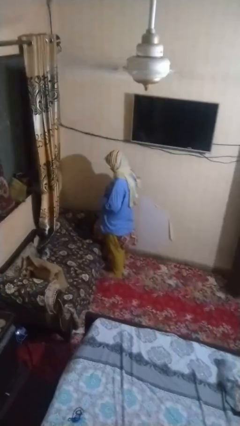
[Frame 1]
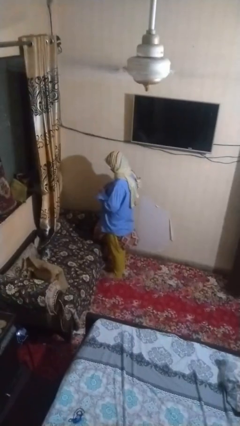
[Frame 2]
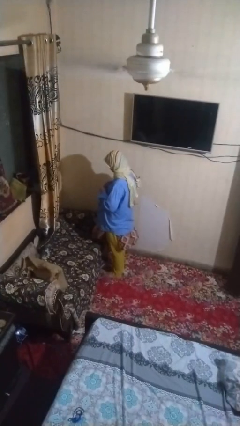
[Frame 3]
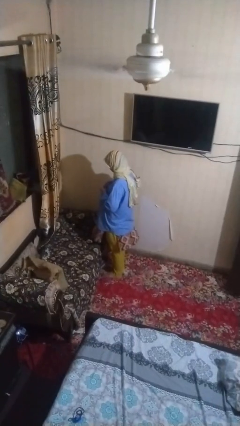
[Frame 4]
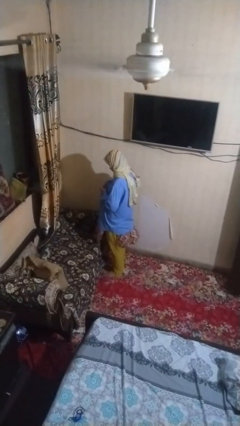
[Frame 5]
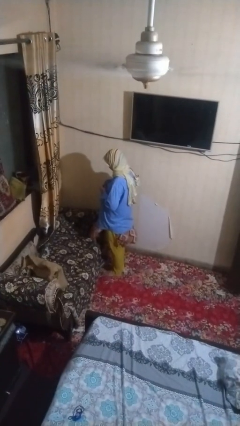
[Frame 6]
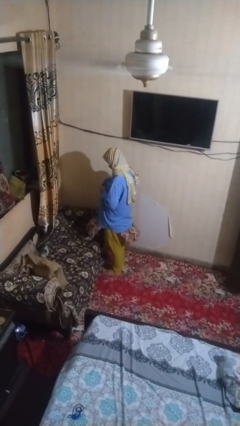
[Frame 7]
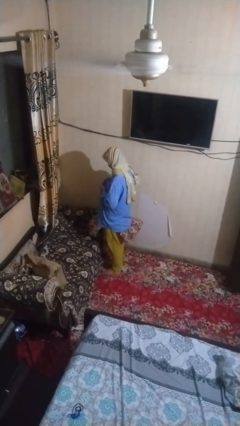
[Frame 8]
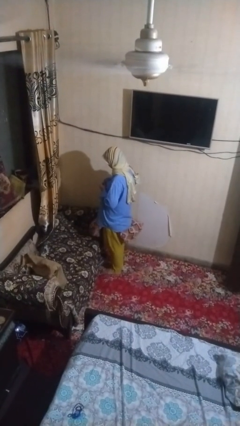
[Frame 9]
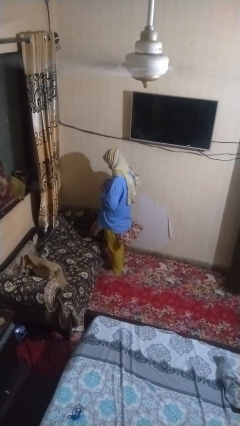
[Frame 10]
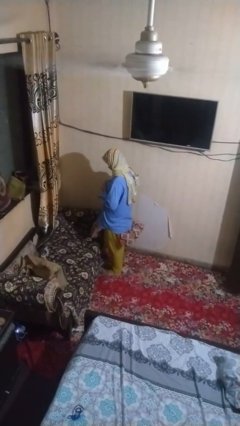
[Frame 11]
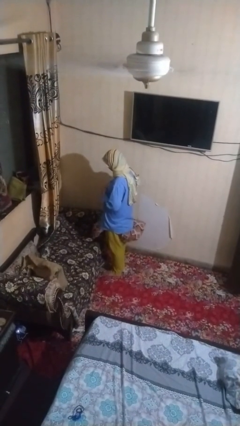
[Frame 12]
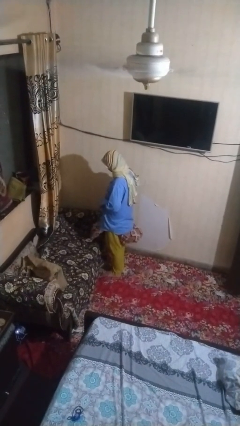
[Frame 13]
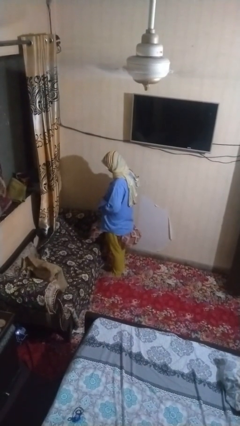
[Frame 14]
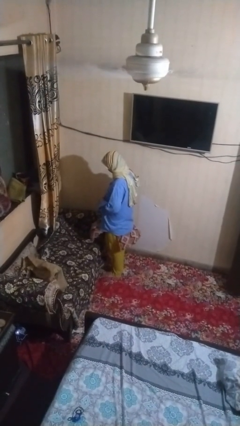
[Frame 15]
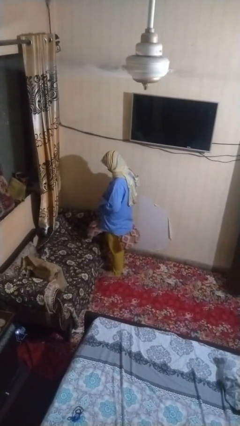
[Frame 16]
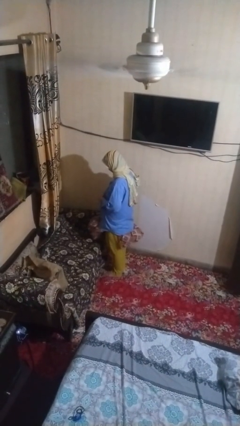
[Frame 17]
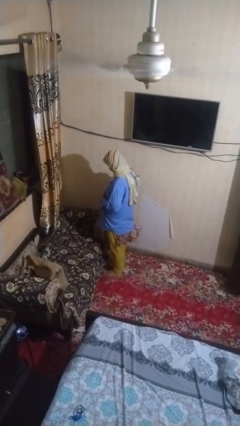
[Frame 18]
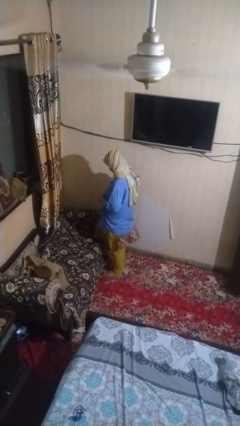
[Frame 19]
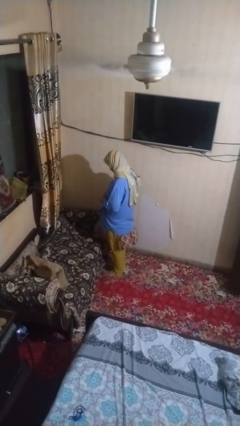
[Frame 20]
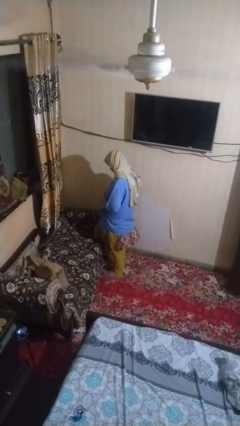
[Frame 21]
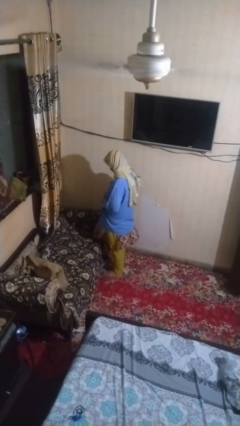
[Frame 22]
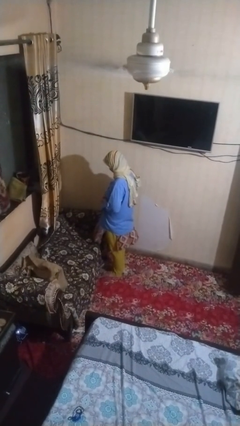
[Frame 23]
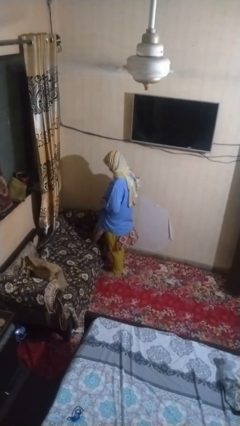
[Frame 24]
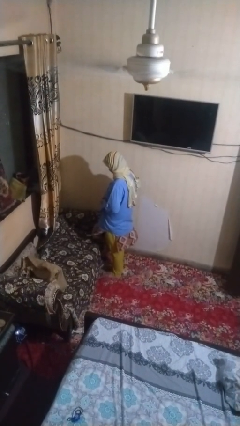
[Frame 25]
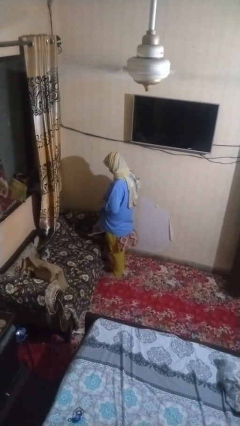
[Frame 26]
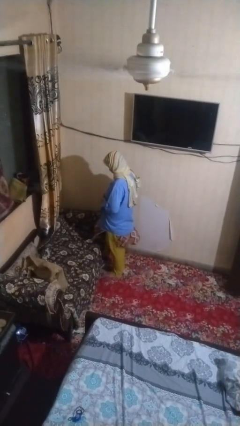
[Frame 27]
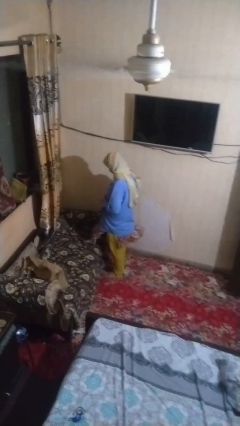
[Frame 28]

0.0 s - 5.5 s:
person buttons shirt

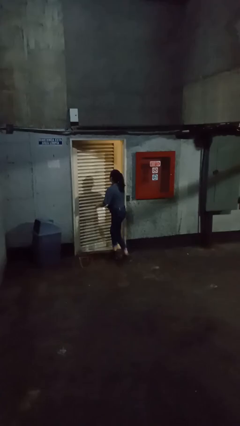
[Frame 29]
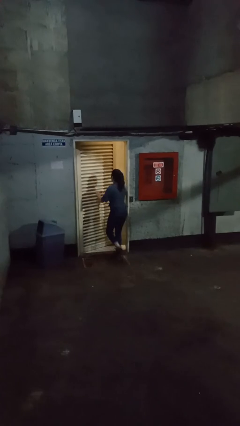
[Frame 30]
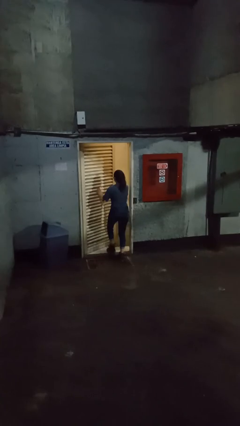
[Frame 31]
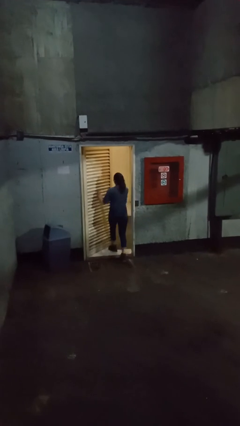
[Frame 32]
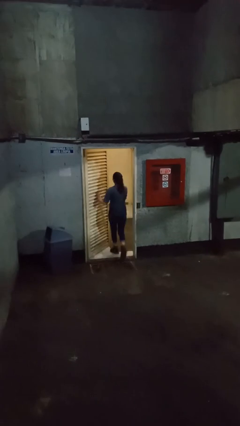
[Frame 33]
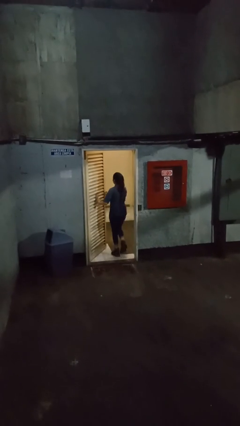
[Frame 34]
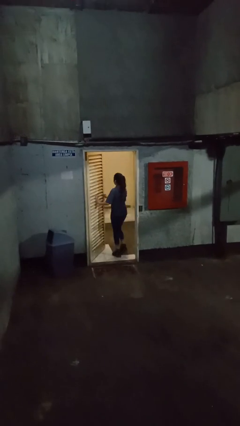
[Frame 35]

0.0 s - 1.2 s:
person opens facility door

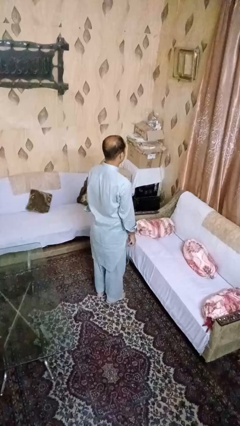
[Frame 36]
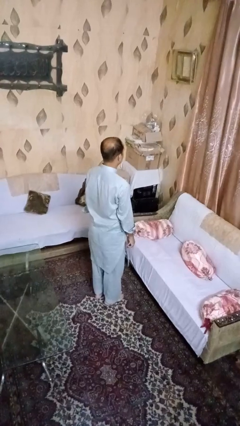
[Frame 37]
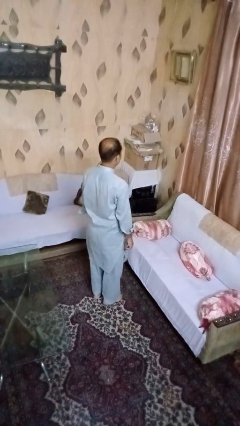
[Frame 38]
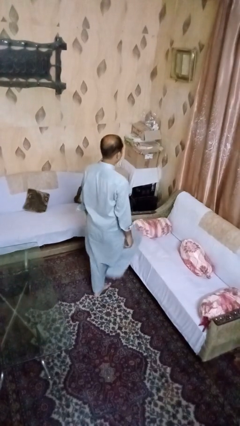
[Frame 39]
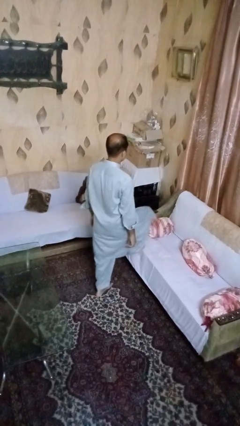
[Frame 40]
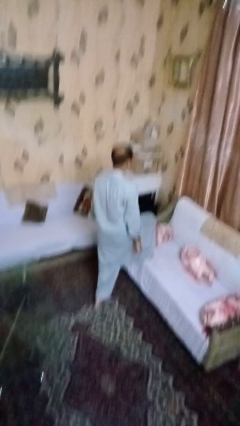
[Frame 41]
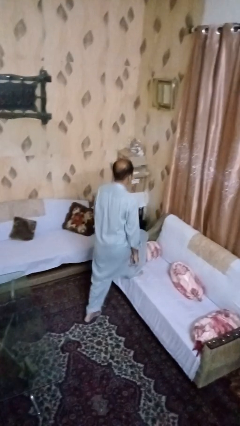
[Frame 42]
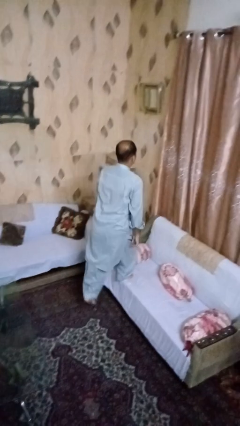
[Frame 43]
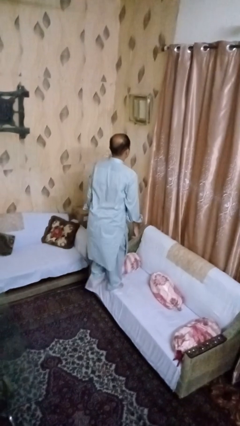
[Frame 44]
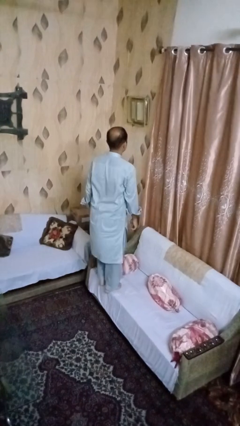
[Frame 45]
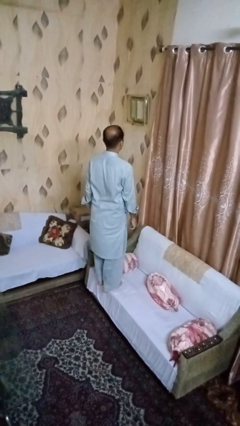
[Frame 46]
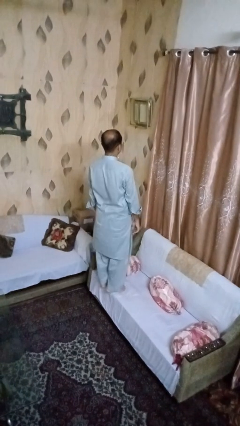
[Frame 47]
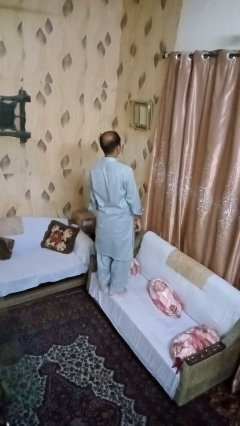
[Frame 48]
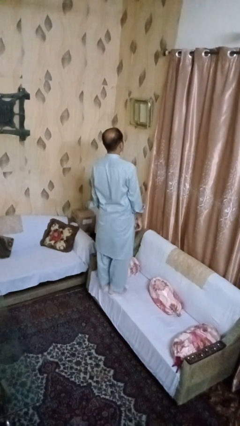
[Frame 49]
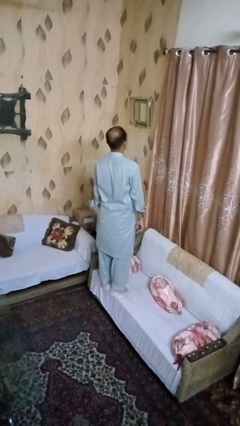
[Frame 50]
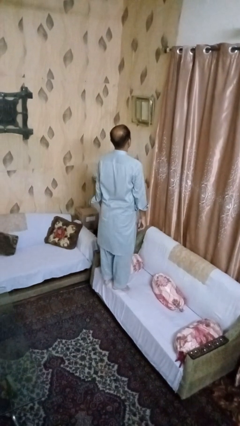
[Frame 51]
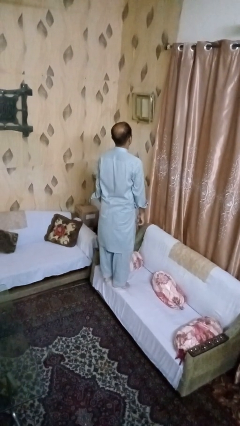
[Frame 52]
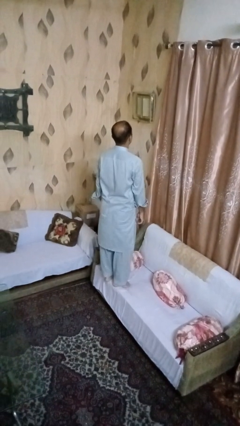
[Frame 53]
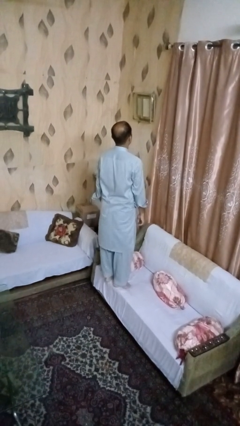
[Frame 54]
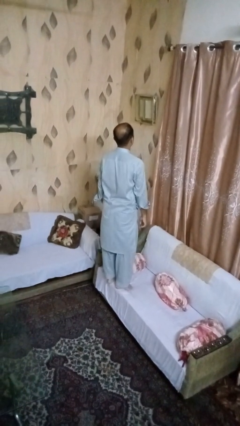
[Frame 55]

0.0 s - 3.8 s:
person climbs on couch

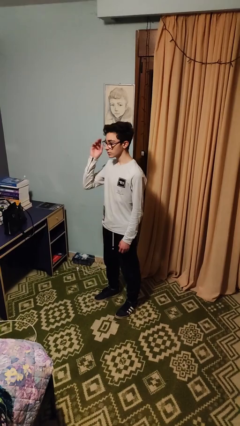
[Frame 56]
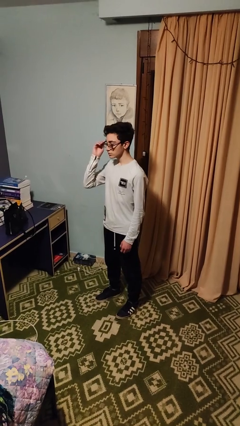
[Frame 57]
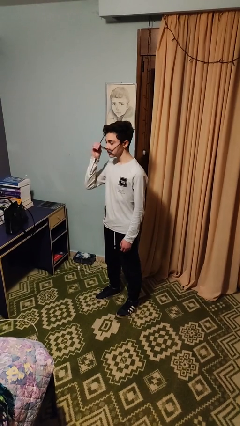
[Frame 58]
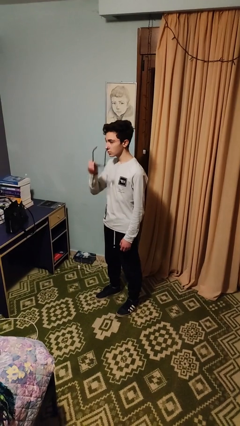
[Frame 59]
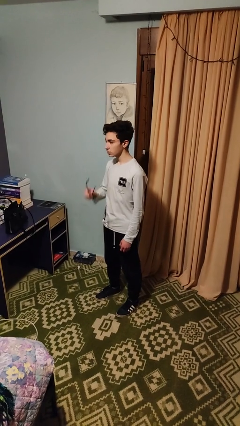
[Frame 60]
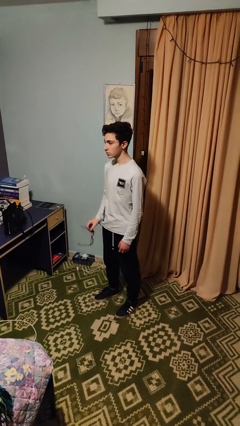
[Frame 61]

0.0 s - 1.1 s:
person takes off glasses

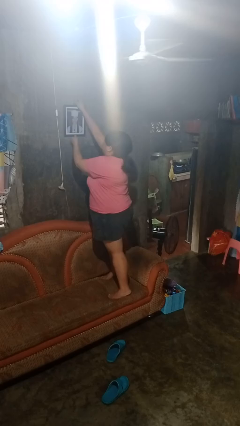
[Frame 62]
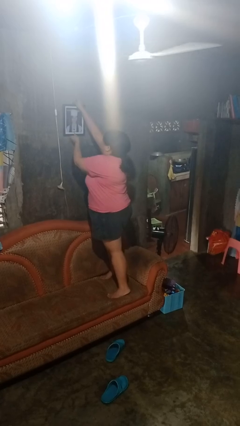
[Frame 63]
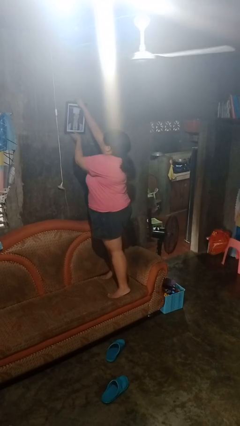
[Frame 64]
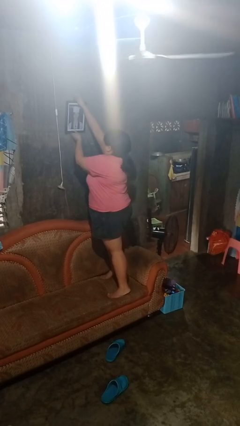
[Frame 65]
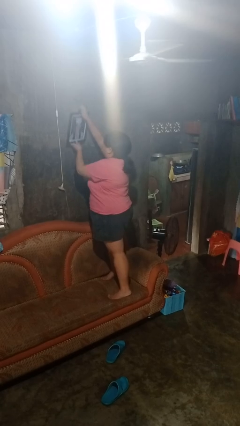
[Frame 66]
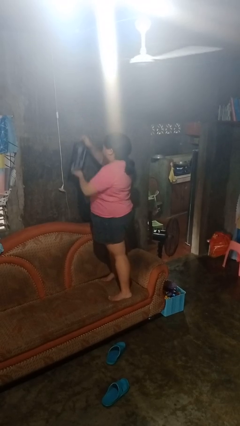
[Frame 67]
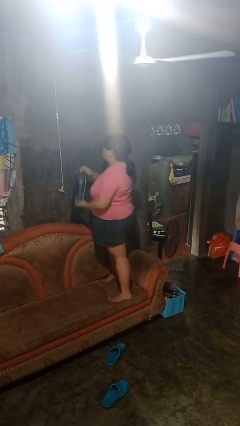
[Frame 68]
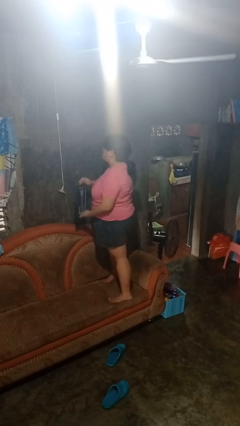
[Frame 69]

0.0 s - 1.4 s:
person takes down picture frame

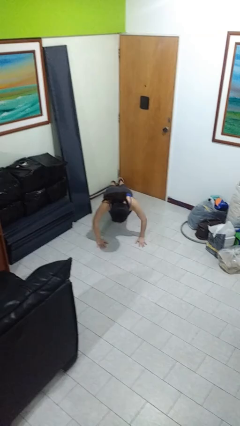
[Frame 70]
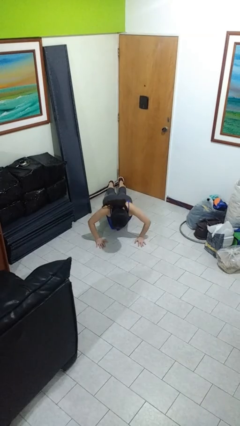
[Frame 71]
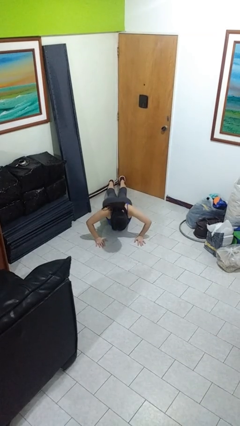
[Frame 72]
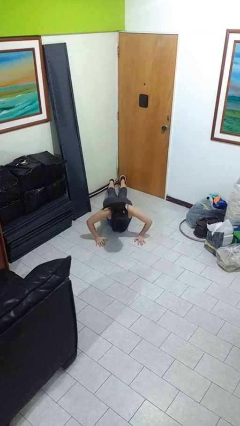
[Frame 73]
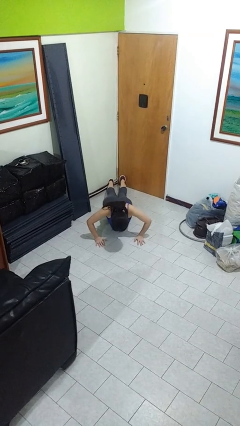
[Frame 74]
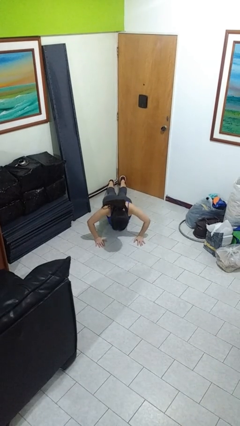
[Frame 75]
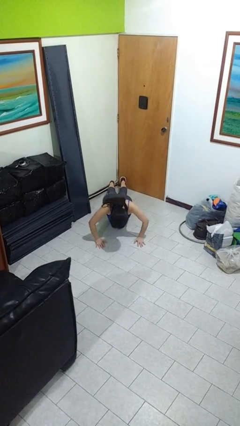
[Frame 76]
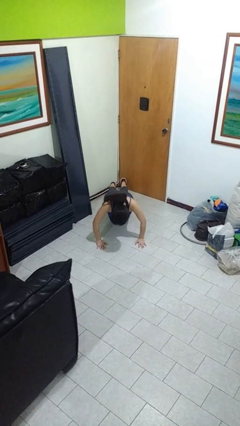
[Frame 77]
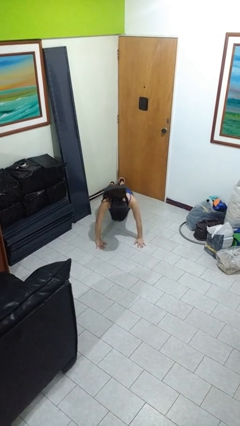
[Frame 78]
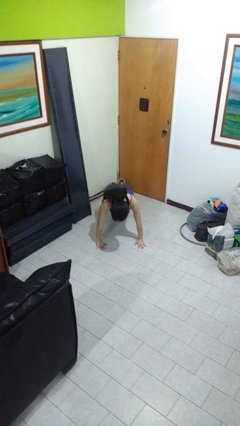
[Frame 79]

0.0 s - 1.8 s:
person exercises with pushup

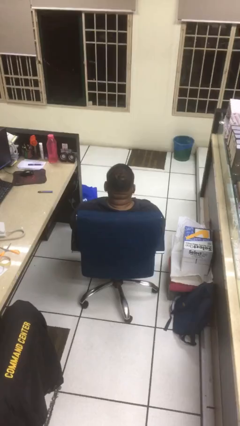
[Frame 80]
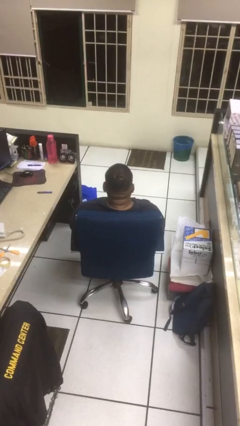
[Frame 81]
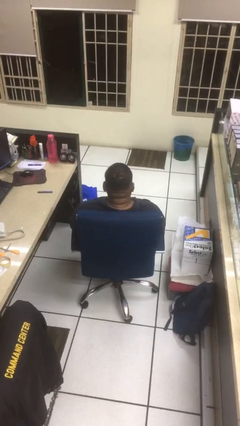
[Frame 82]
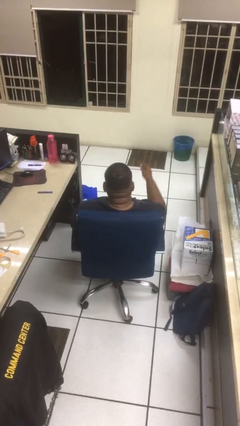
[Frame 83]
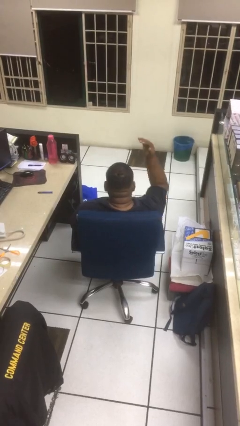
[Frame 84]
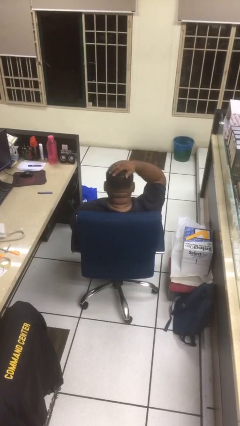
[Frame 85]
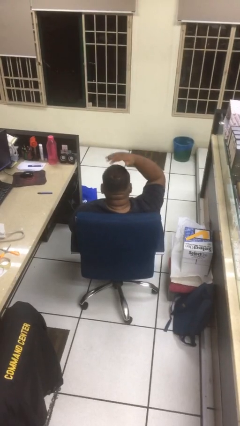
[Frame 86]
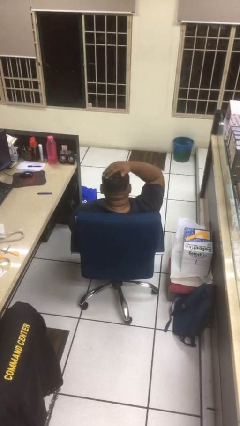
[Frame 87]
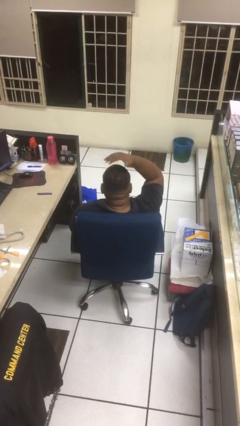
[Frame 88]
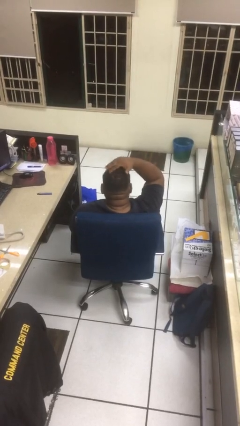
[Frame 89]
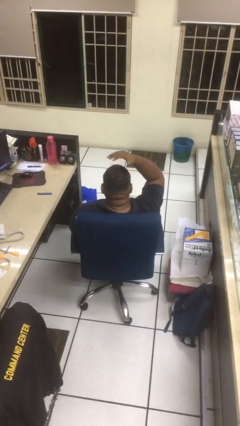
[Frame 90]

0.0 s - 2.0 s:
person pats head
